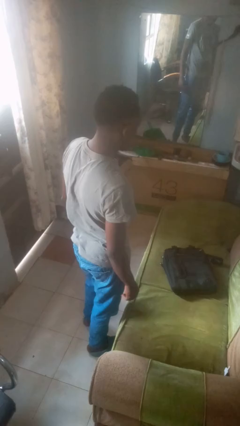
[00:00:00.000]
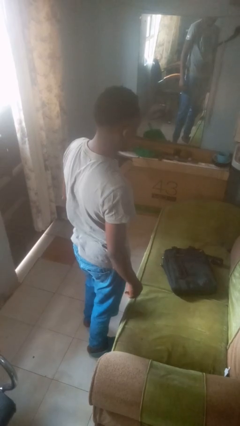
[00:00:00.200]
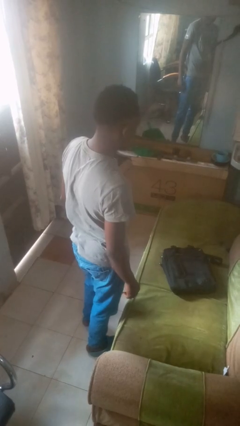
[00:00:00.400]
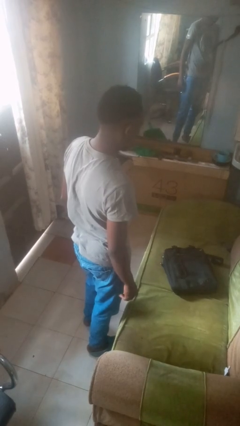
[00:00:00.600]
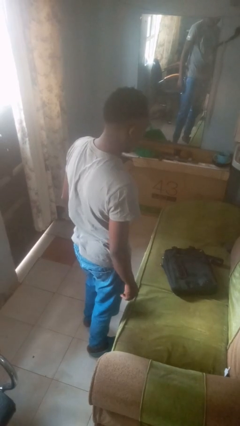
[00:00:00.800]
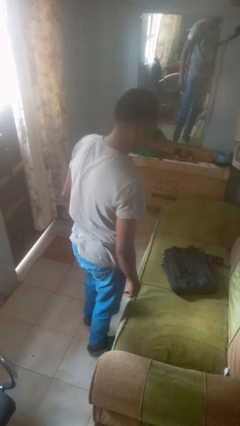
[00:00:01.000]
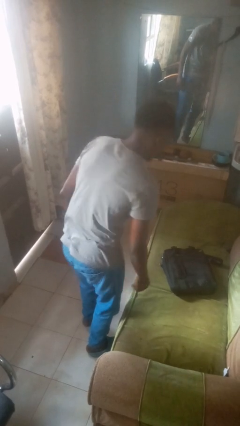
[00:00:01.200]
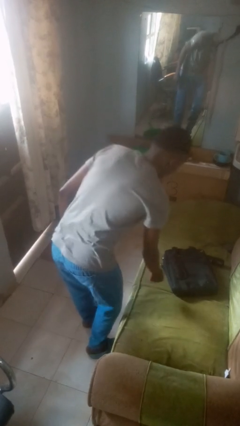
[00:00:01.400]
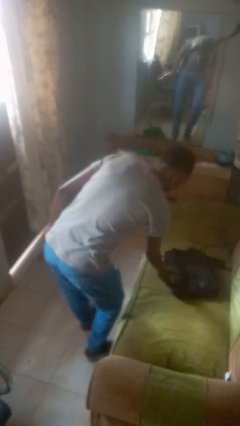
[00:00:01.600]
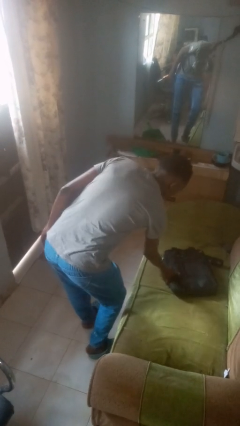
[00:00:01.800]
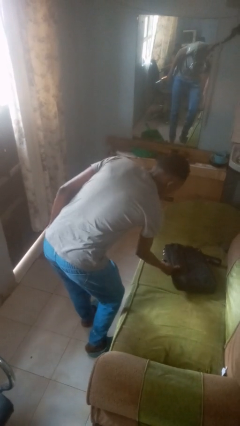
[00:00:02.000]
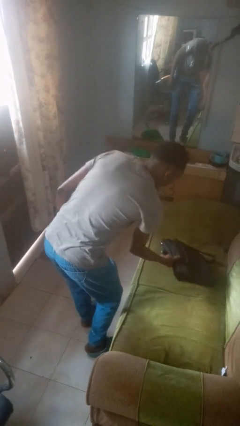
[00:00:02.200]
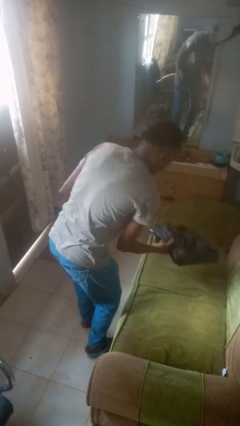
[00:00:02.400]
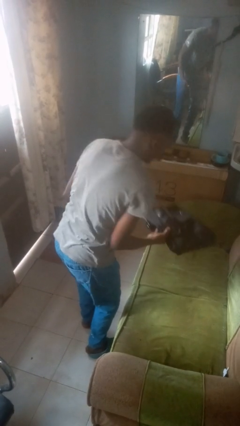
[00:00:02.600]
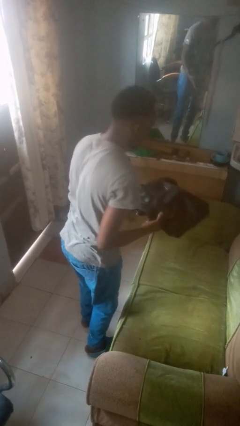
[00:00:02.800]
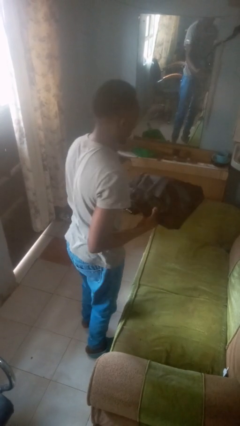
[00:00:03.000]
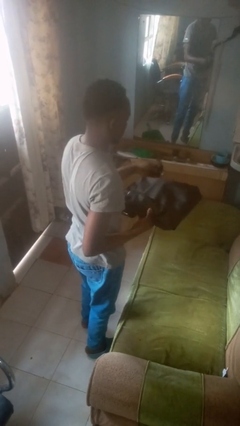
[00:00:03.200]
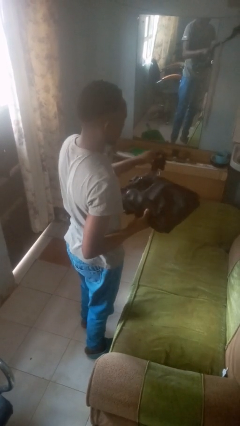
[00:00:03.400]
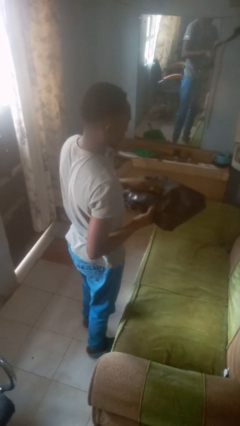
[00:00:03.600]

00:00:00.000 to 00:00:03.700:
person picks up object from couch

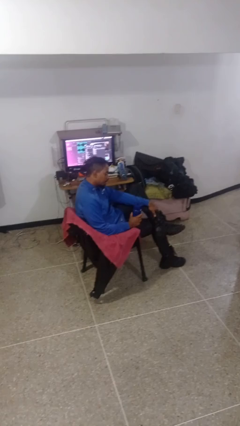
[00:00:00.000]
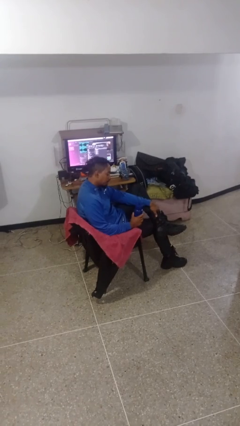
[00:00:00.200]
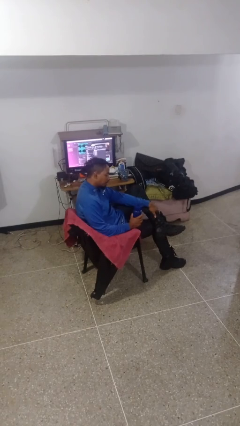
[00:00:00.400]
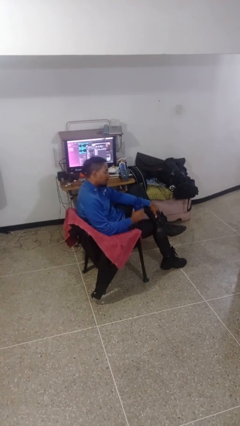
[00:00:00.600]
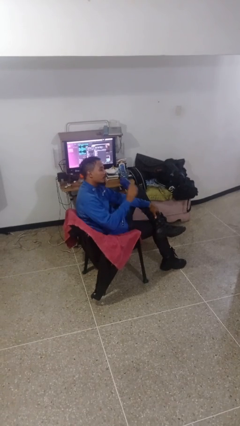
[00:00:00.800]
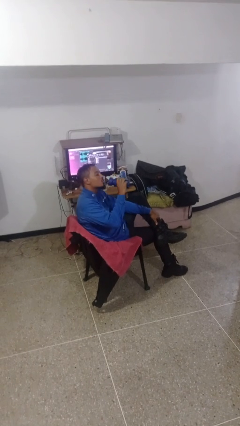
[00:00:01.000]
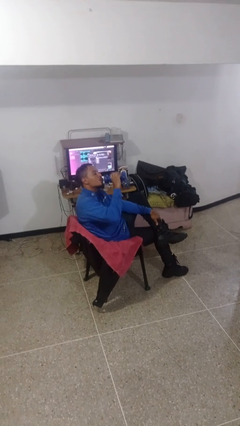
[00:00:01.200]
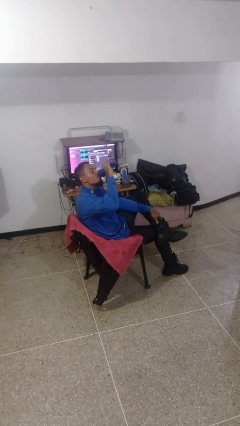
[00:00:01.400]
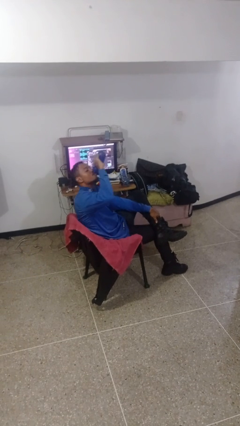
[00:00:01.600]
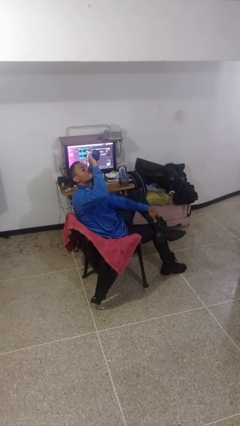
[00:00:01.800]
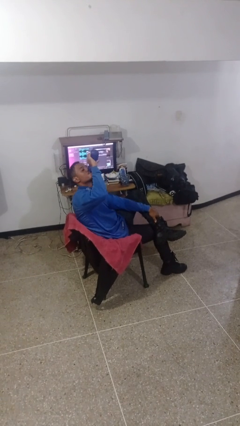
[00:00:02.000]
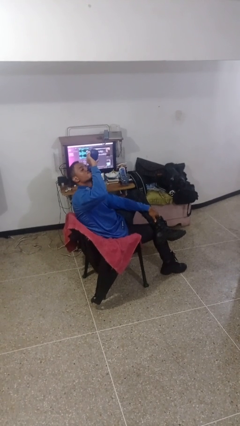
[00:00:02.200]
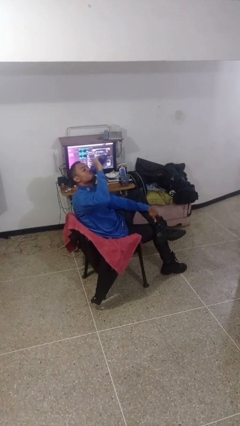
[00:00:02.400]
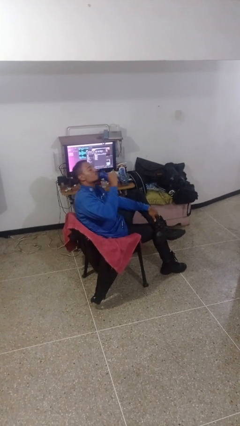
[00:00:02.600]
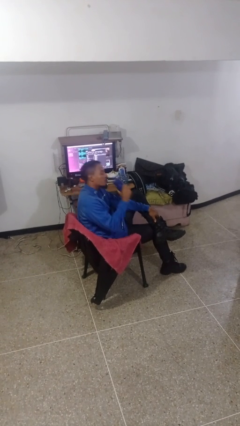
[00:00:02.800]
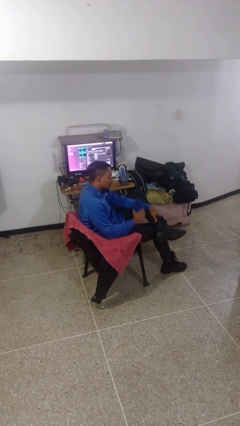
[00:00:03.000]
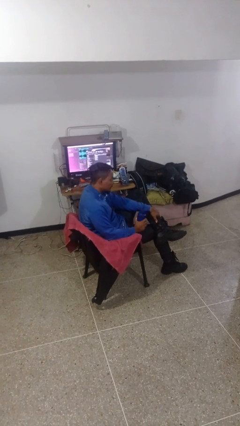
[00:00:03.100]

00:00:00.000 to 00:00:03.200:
person drinks from bottle

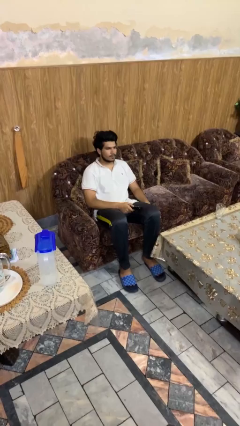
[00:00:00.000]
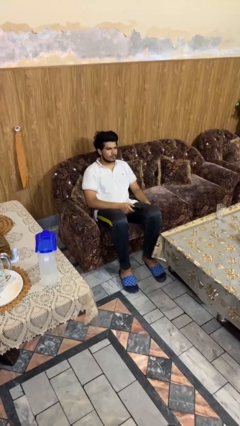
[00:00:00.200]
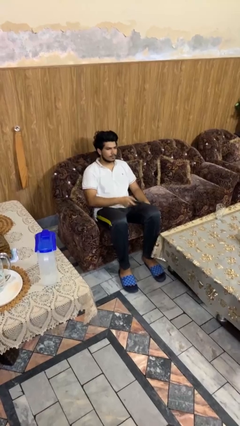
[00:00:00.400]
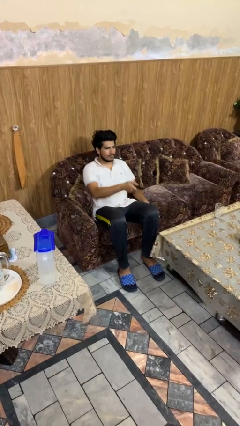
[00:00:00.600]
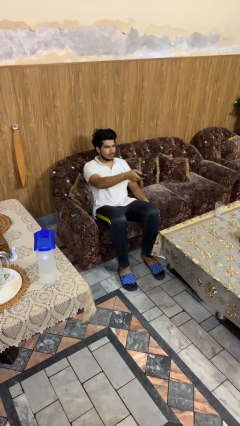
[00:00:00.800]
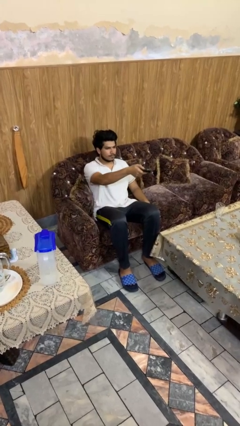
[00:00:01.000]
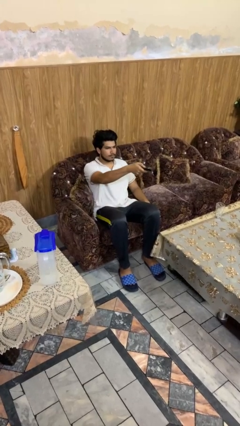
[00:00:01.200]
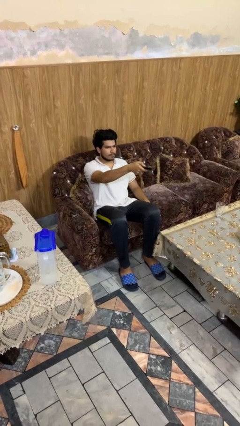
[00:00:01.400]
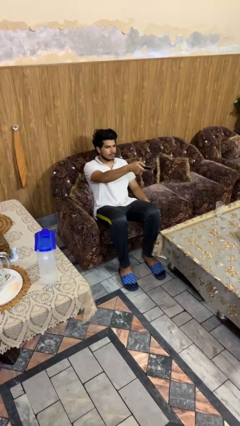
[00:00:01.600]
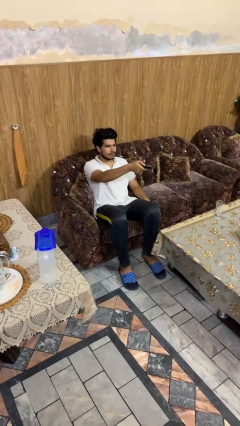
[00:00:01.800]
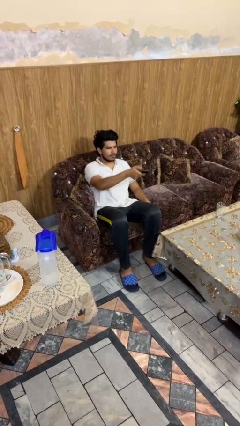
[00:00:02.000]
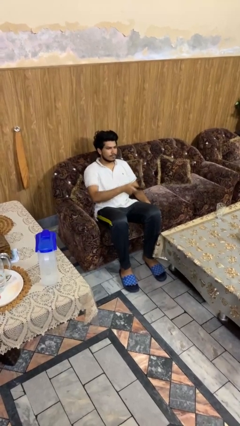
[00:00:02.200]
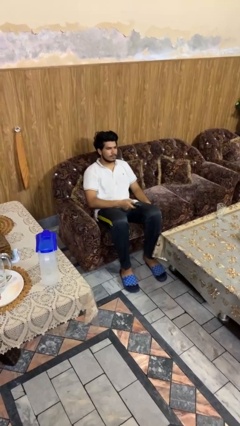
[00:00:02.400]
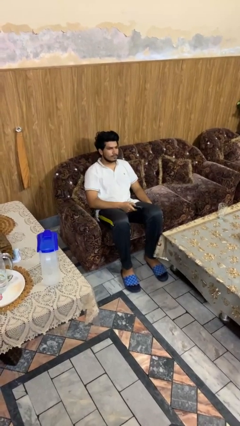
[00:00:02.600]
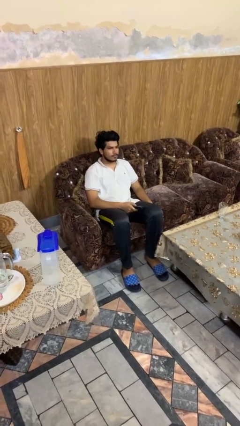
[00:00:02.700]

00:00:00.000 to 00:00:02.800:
person uses television remote

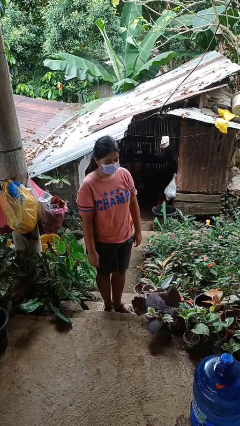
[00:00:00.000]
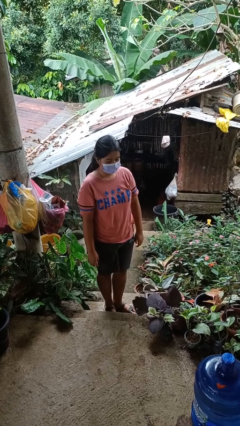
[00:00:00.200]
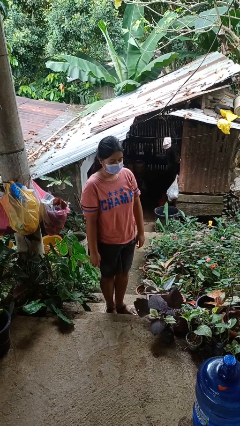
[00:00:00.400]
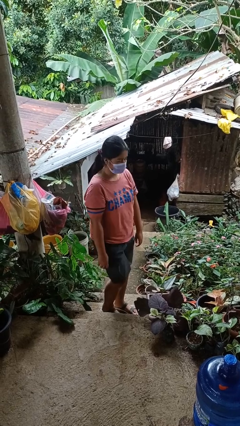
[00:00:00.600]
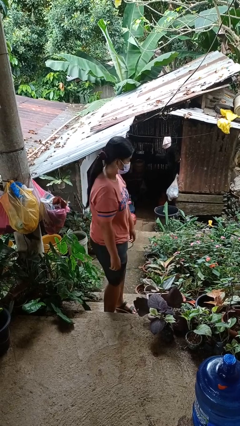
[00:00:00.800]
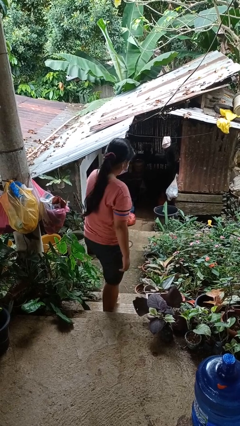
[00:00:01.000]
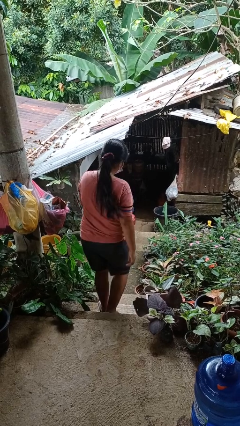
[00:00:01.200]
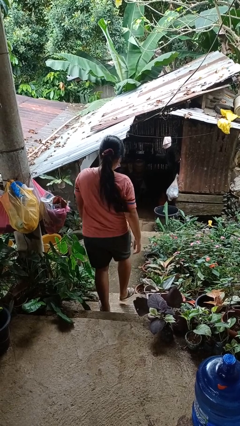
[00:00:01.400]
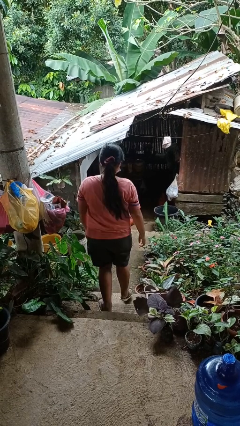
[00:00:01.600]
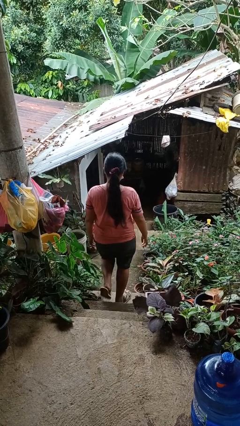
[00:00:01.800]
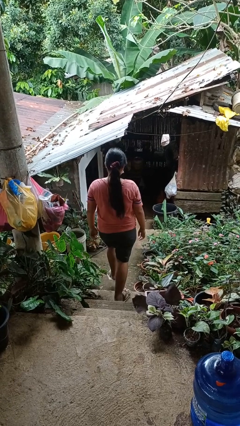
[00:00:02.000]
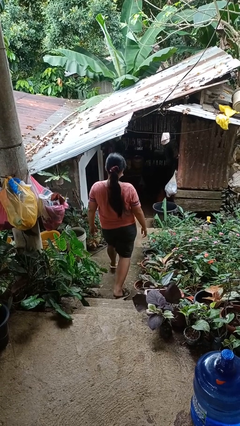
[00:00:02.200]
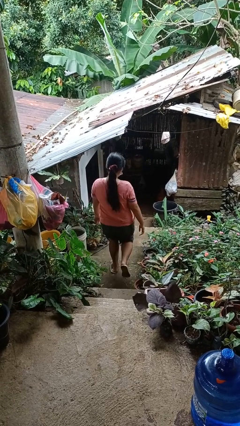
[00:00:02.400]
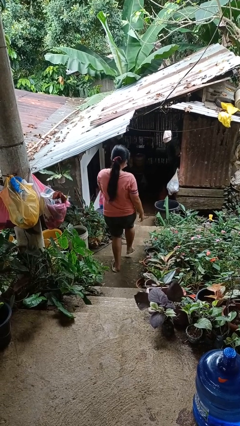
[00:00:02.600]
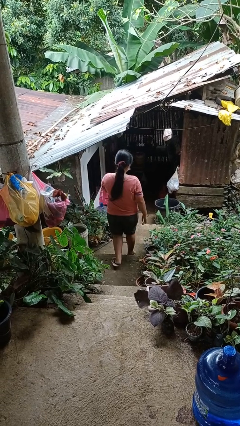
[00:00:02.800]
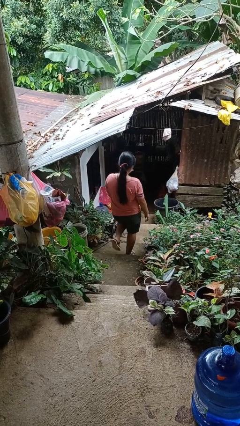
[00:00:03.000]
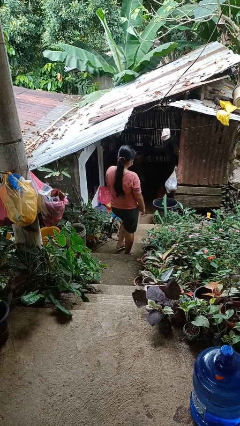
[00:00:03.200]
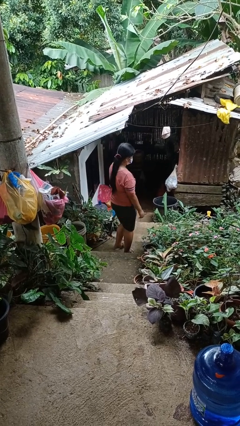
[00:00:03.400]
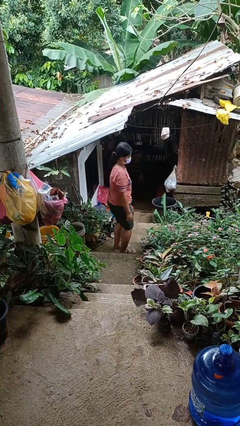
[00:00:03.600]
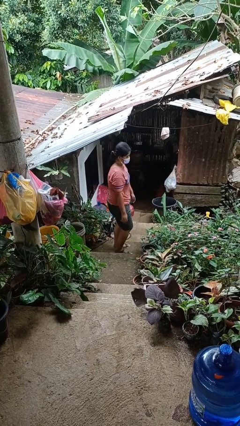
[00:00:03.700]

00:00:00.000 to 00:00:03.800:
person climbs down stairs

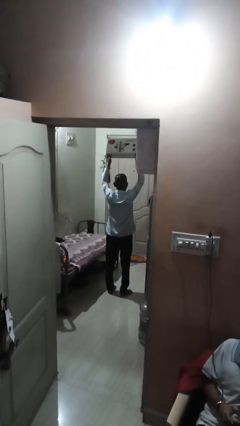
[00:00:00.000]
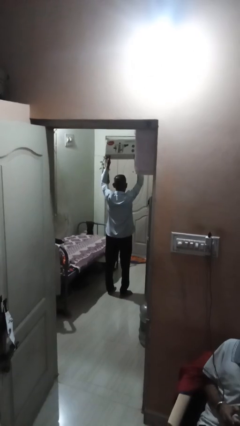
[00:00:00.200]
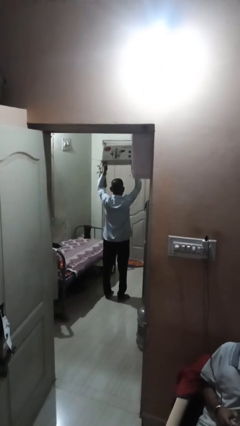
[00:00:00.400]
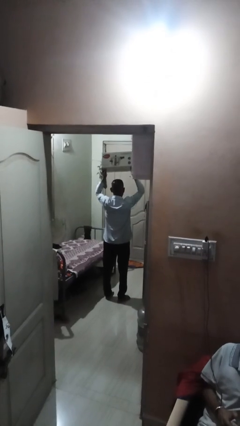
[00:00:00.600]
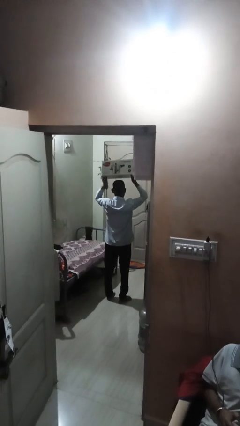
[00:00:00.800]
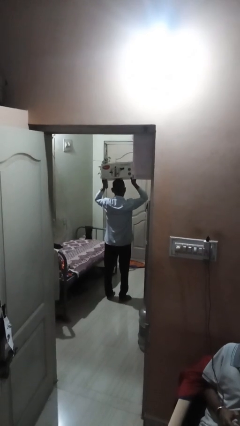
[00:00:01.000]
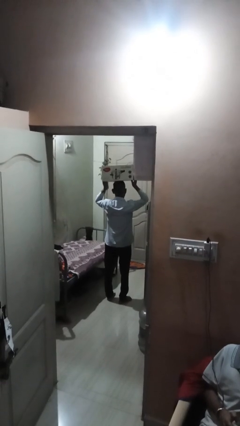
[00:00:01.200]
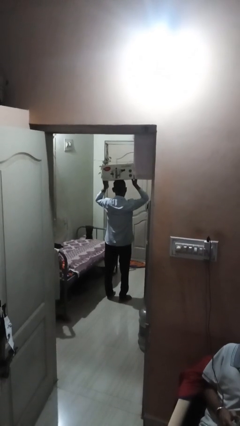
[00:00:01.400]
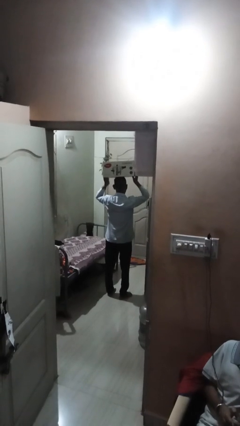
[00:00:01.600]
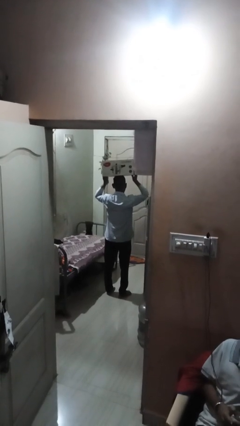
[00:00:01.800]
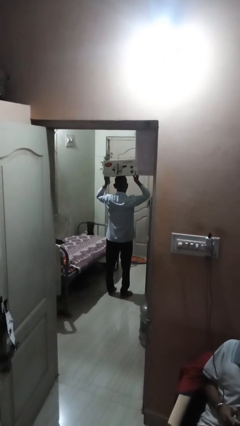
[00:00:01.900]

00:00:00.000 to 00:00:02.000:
person holds object above head

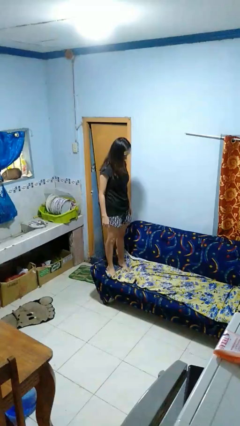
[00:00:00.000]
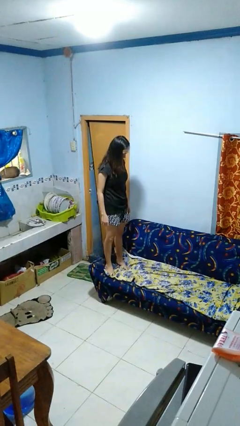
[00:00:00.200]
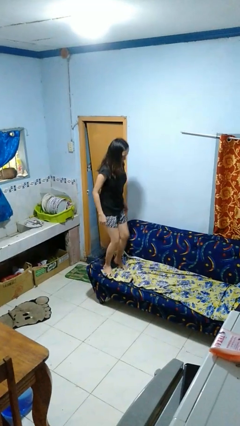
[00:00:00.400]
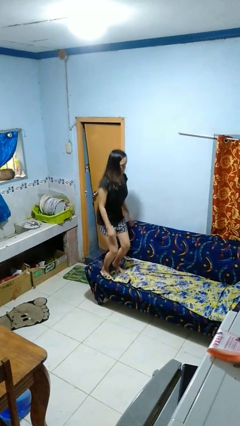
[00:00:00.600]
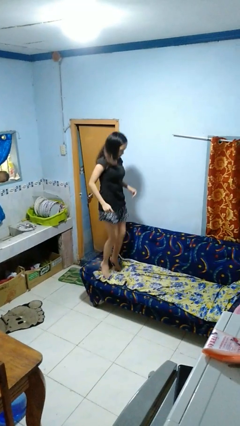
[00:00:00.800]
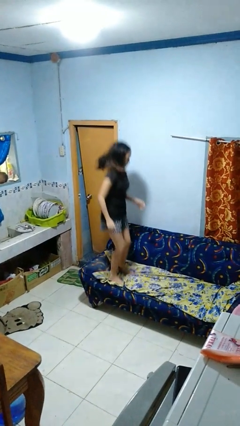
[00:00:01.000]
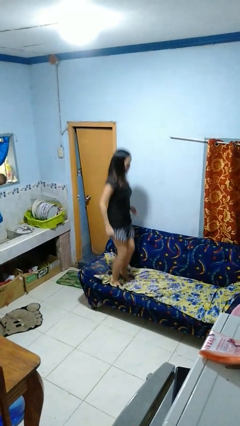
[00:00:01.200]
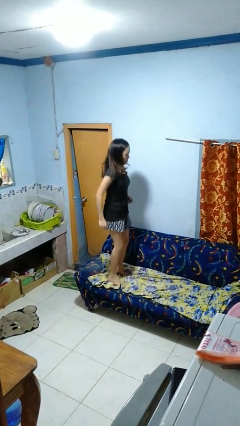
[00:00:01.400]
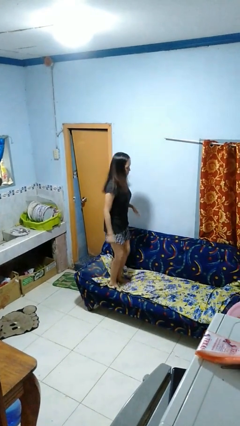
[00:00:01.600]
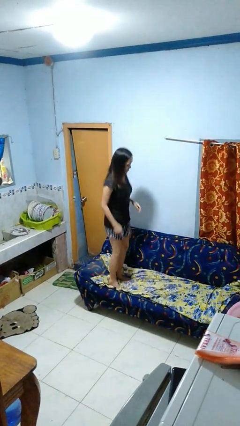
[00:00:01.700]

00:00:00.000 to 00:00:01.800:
person jumps on couch

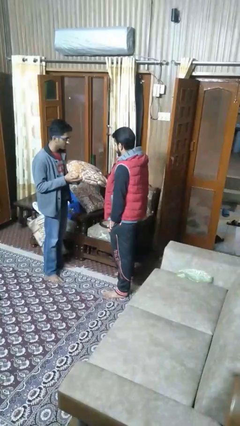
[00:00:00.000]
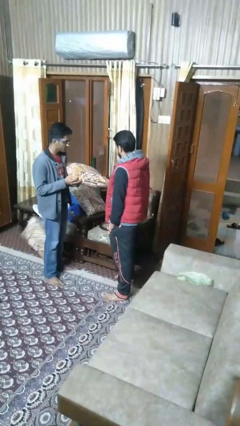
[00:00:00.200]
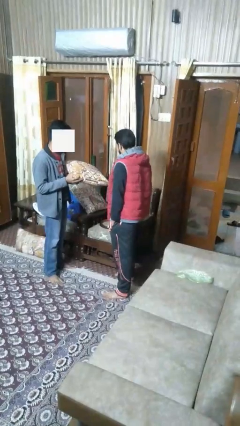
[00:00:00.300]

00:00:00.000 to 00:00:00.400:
person transfers object to person
